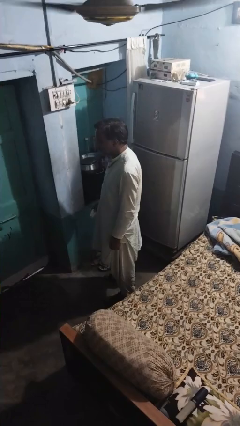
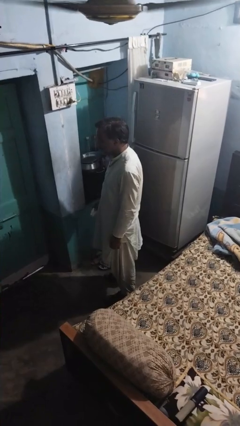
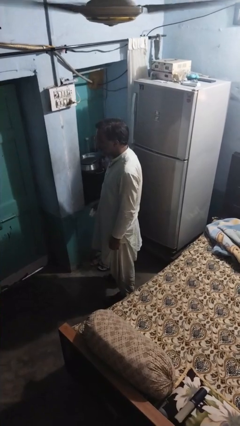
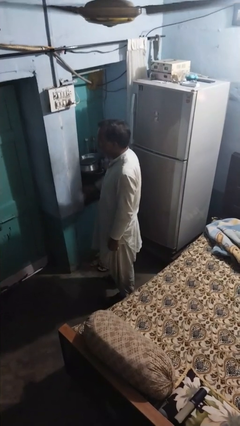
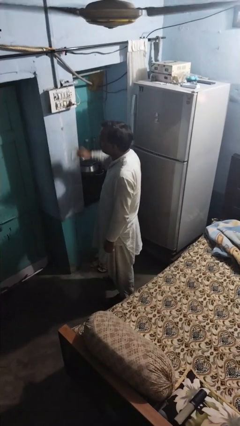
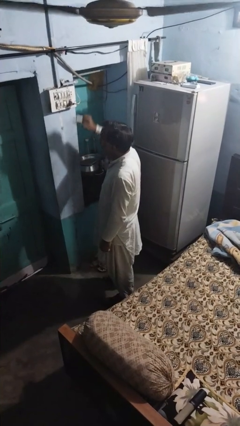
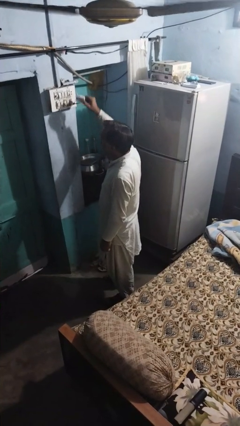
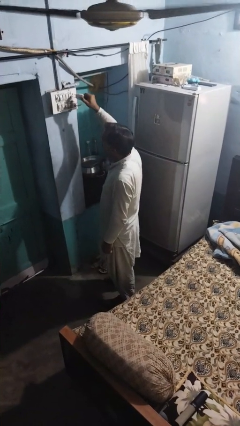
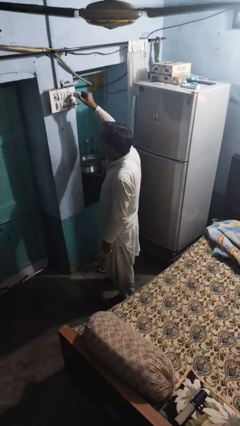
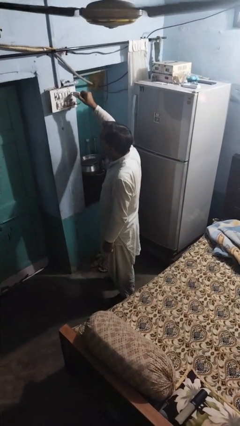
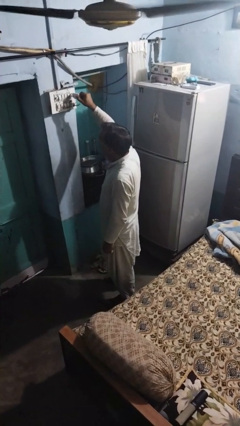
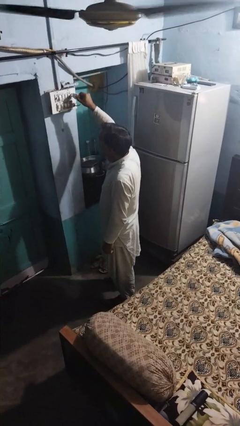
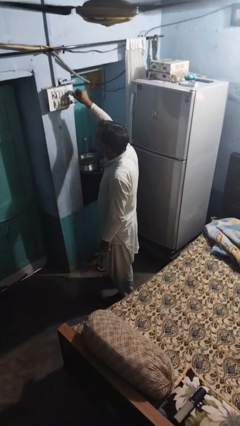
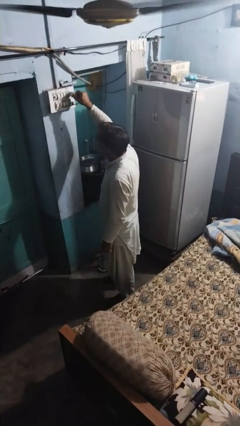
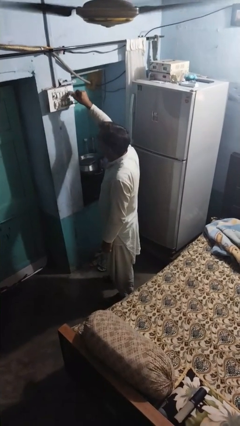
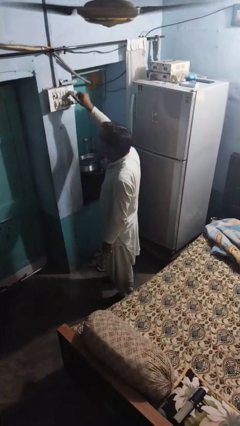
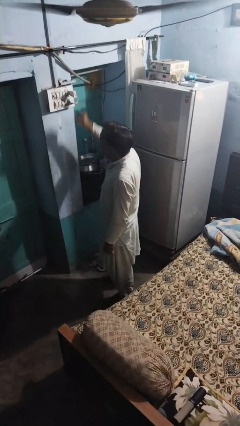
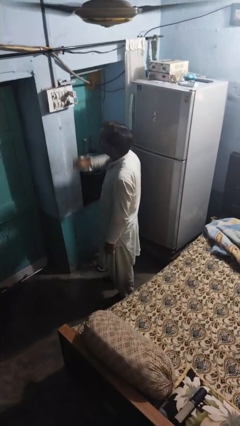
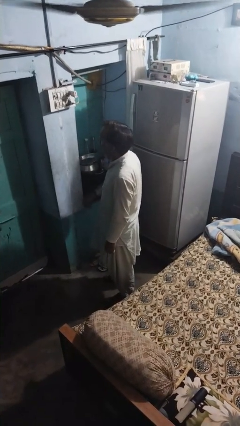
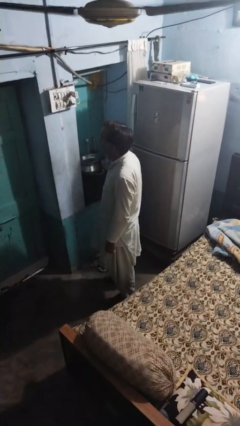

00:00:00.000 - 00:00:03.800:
person plugs into electrical socket

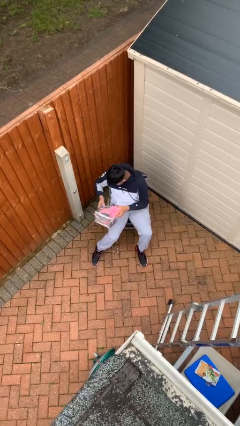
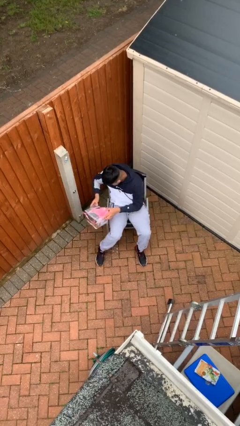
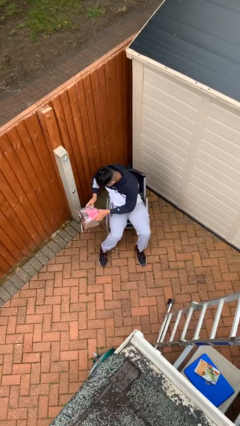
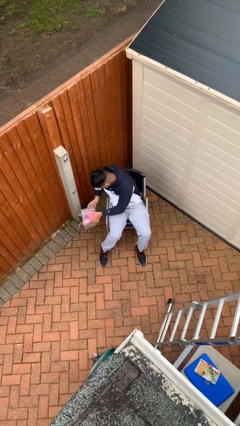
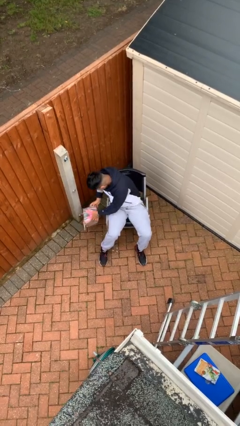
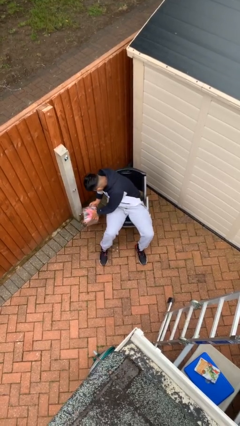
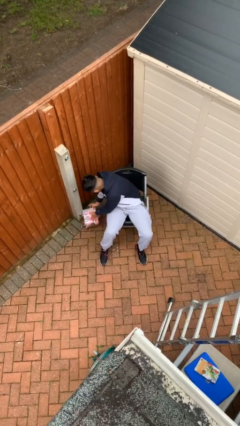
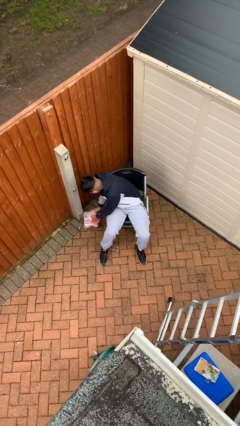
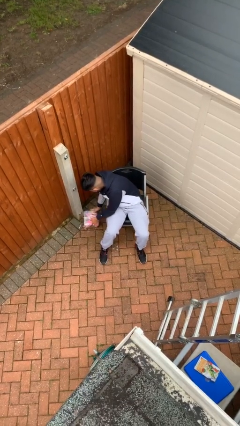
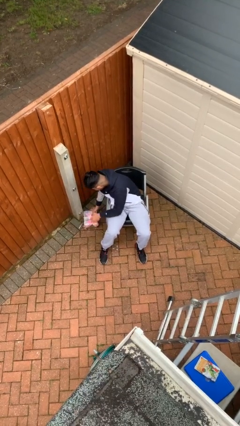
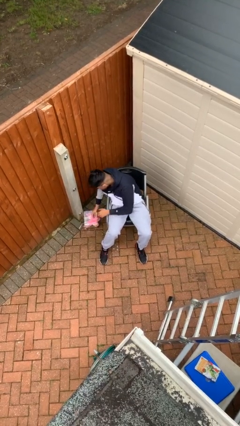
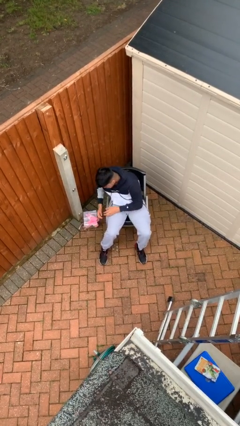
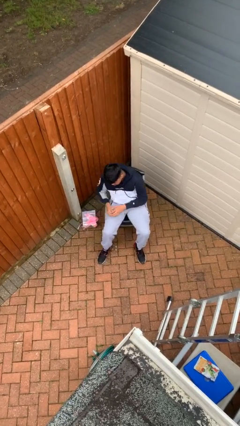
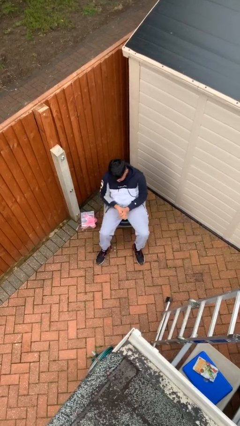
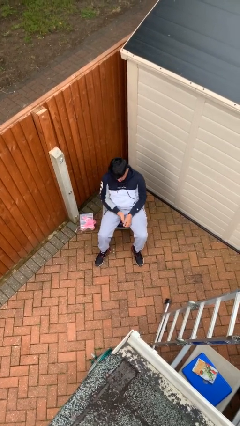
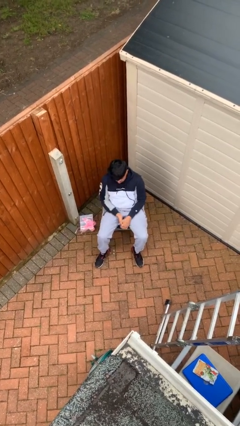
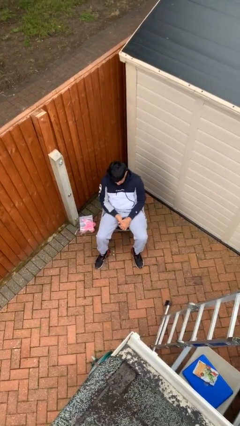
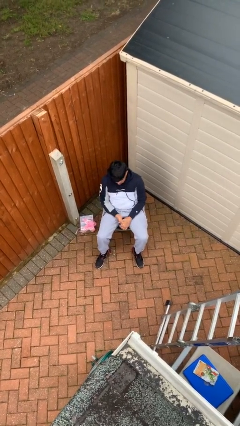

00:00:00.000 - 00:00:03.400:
person puts down object on floor

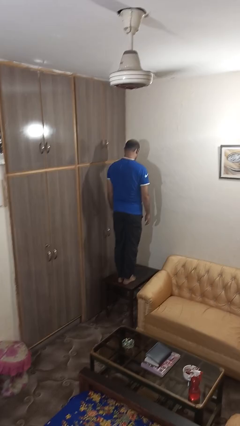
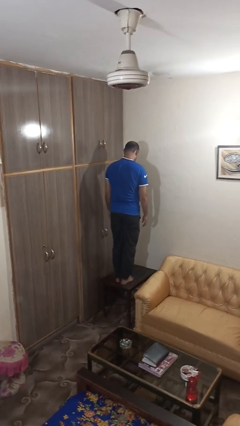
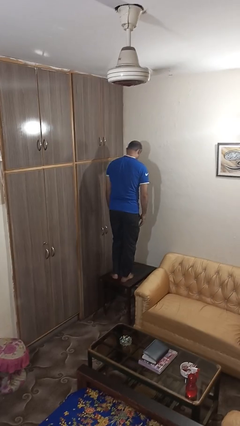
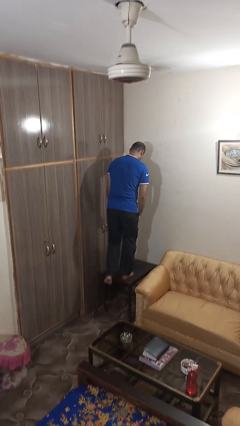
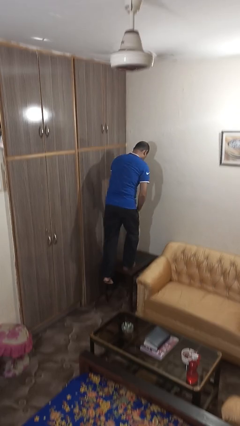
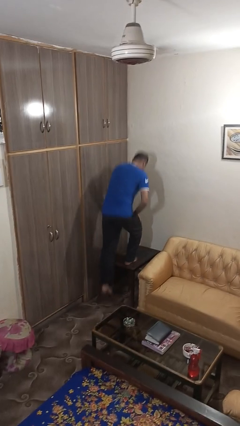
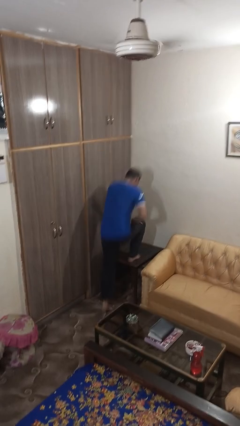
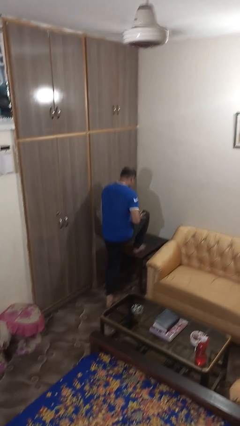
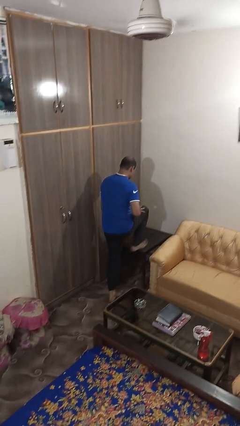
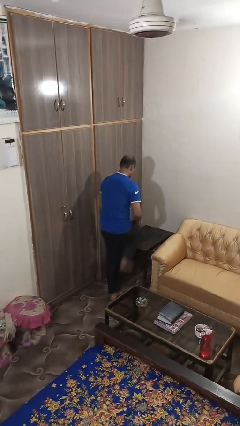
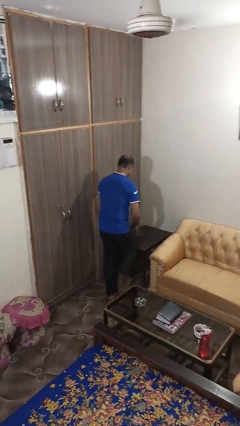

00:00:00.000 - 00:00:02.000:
person climbs off table

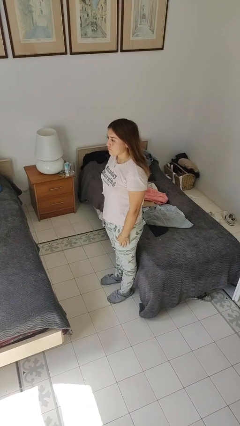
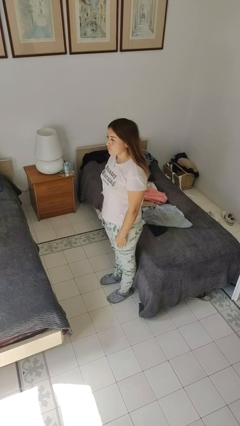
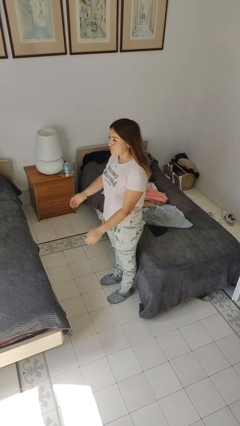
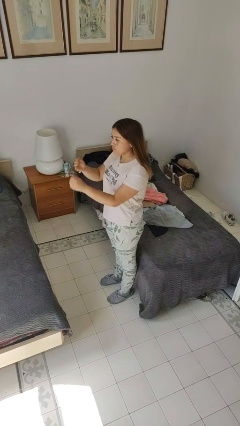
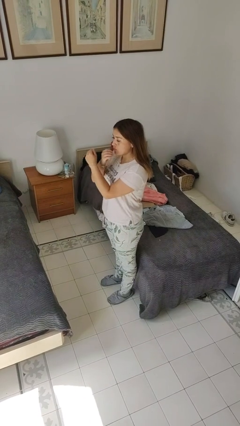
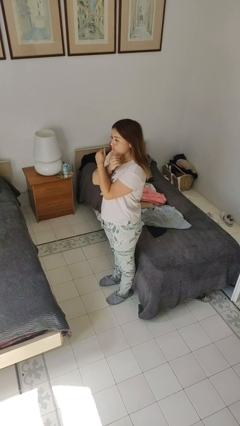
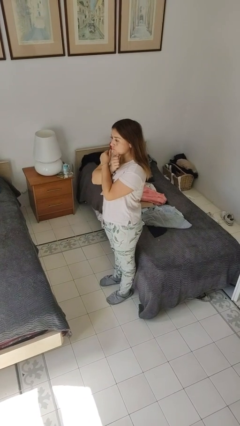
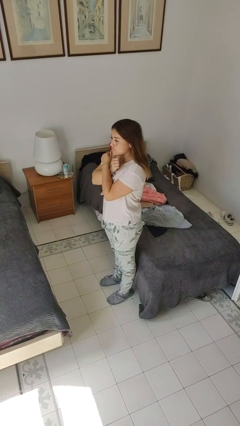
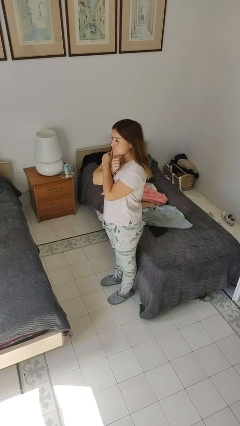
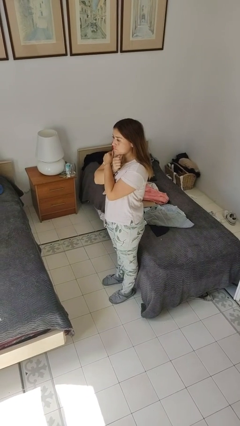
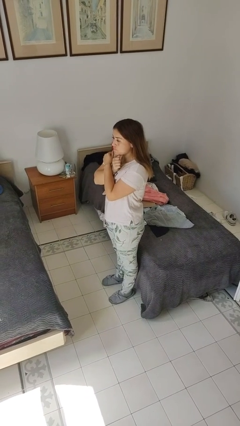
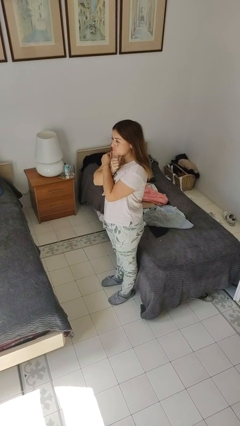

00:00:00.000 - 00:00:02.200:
person gestures arms x

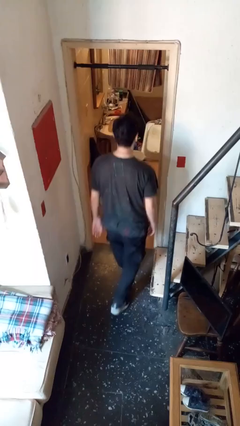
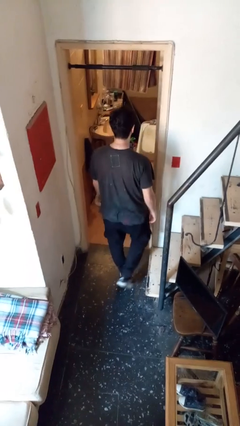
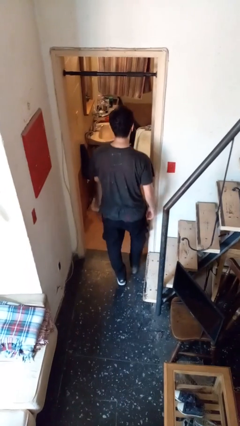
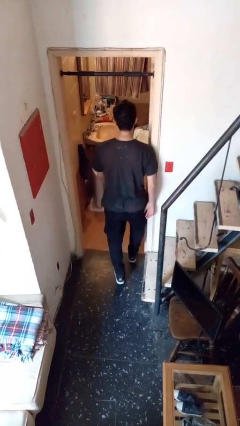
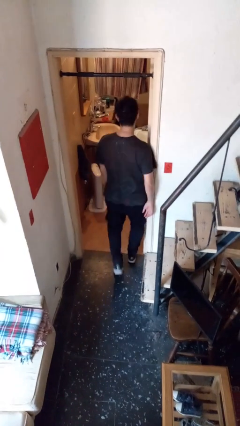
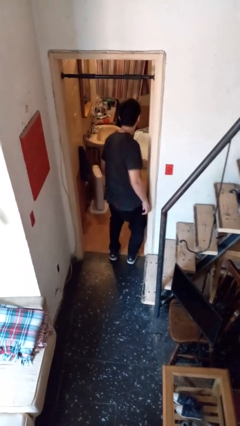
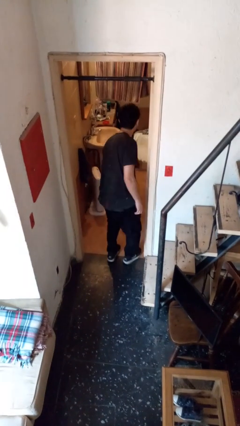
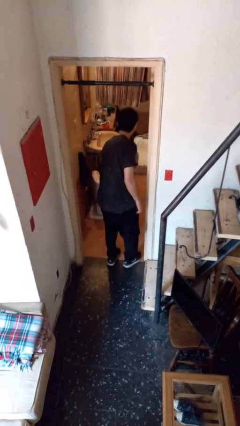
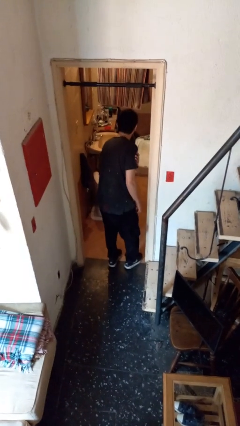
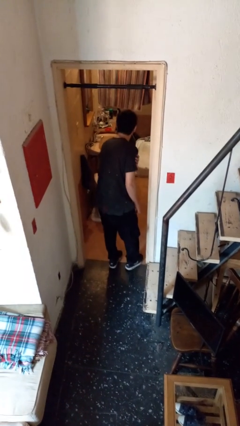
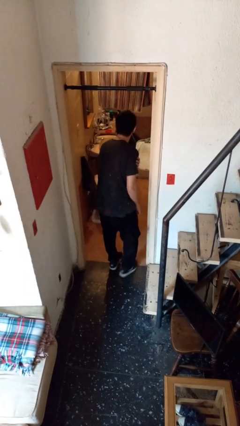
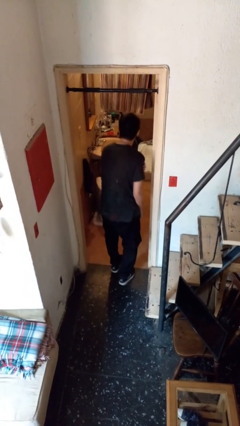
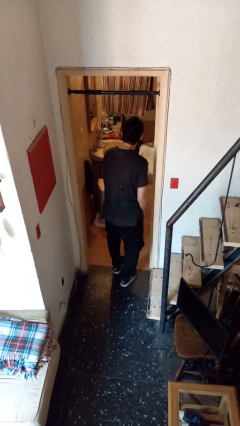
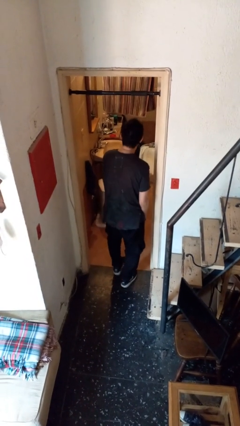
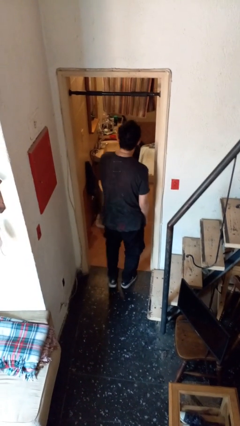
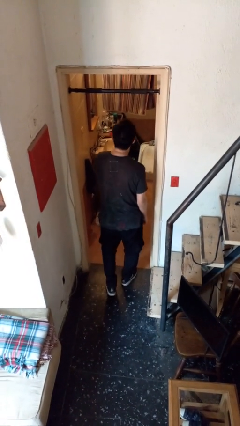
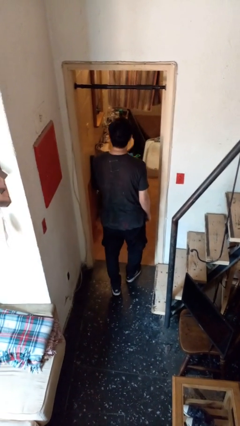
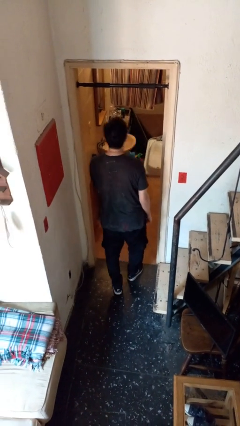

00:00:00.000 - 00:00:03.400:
person bumps into wall

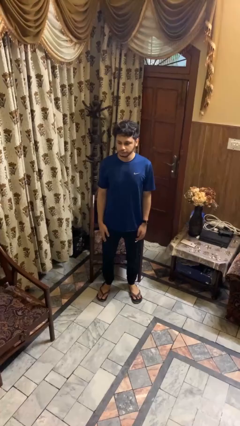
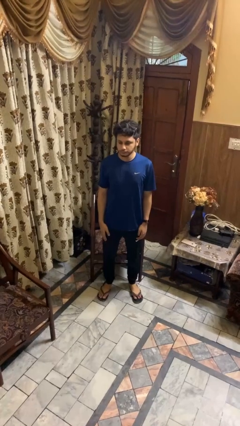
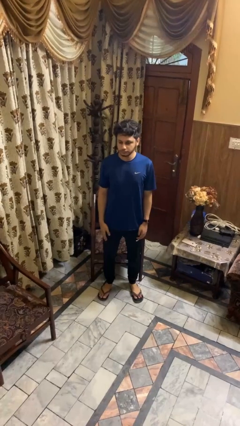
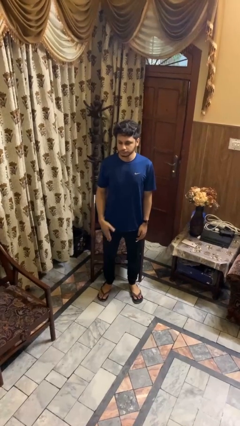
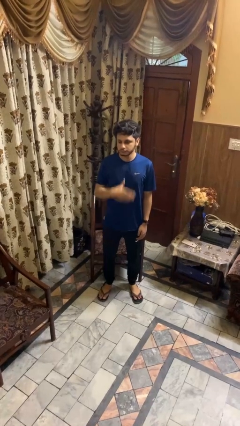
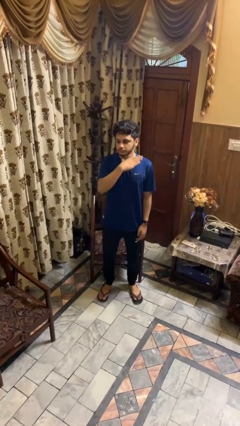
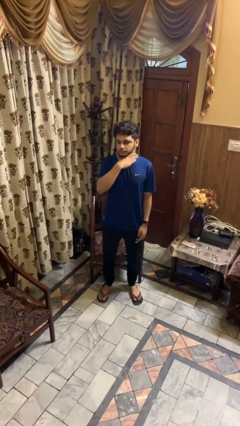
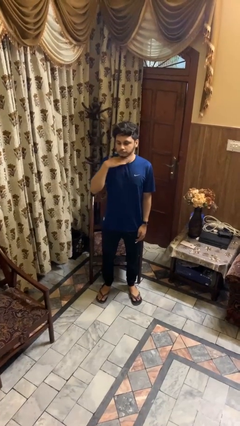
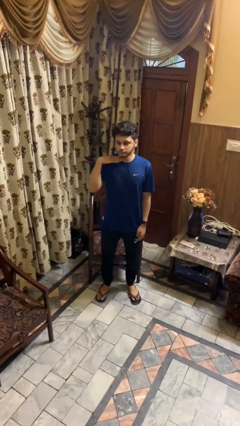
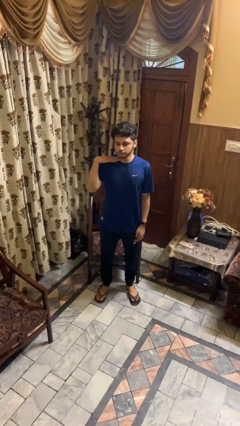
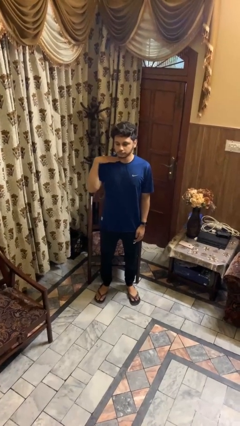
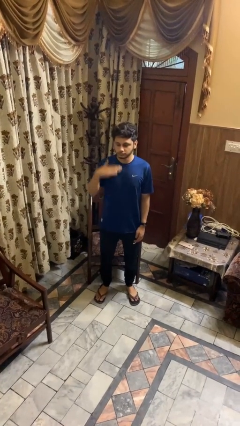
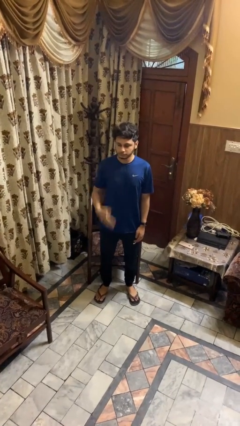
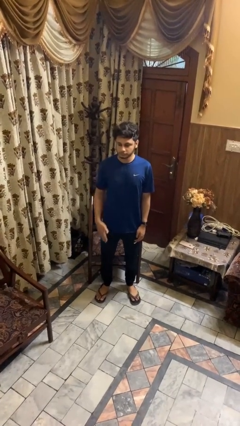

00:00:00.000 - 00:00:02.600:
person gestures cut

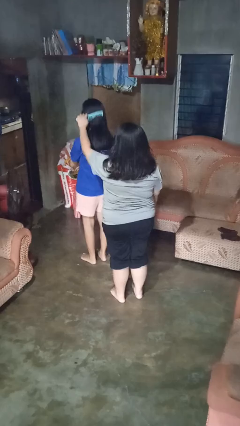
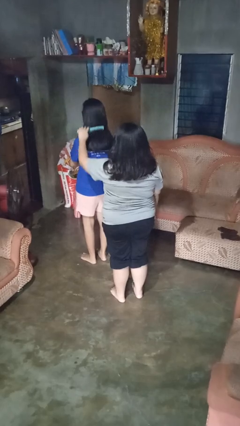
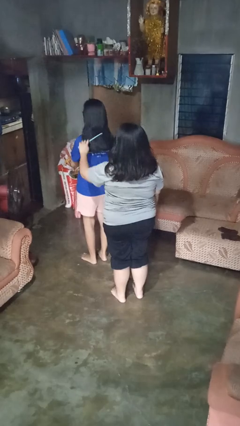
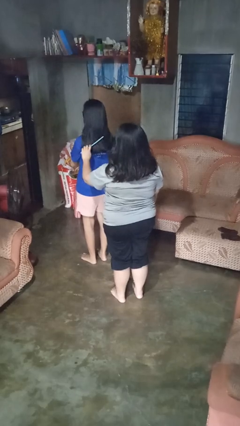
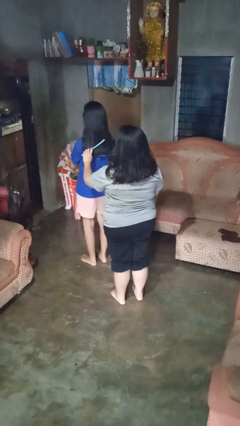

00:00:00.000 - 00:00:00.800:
person brushes hair of person
